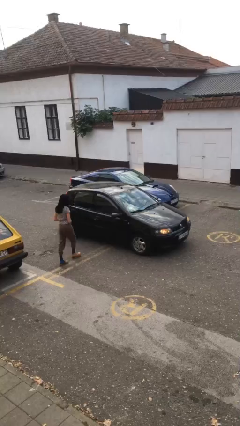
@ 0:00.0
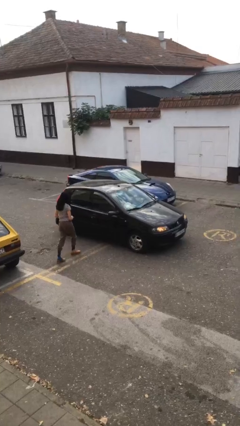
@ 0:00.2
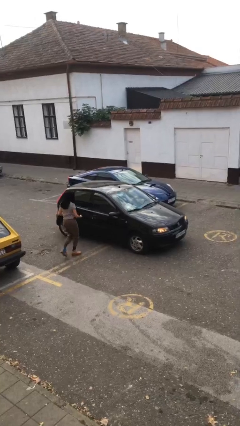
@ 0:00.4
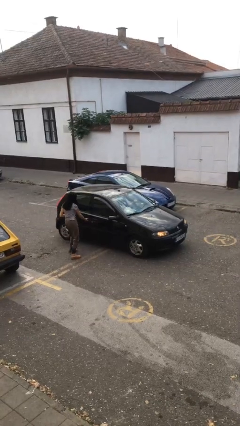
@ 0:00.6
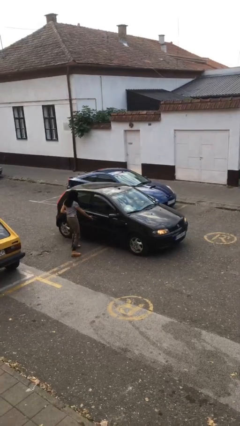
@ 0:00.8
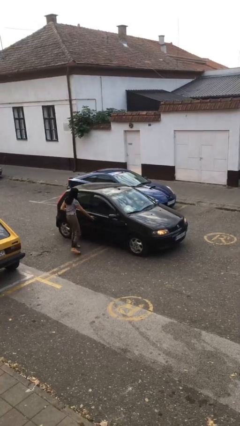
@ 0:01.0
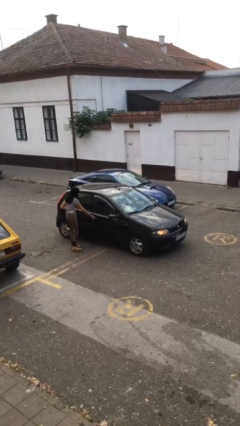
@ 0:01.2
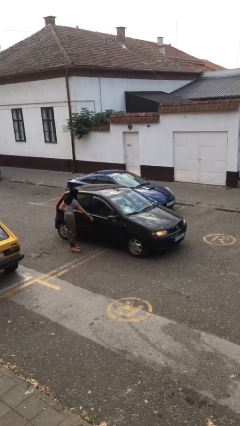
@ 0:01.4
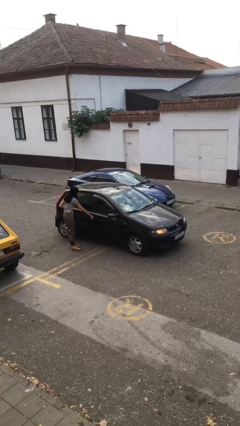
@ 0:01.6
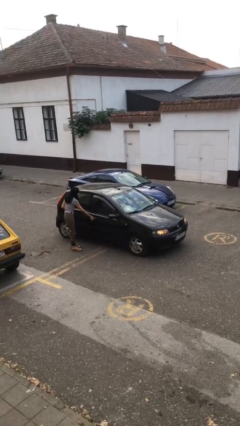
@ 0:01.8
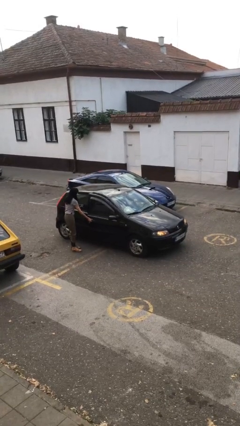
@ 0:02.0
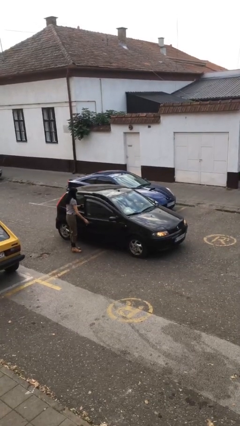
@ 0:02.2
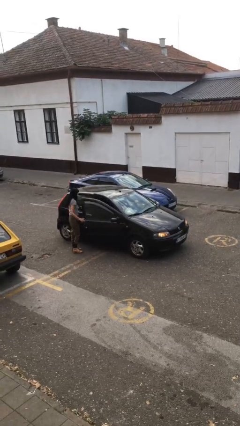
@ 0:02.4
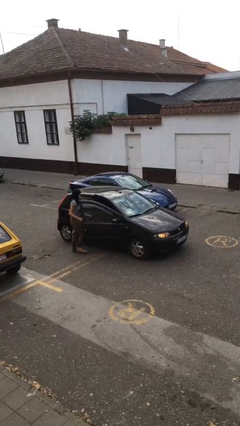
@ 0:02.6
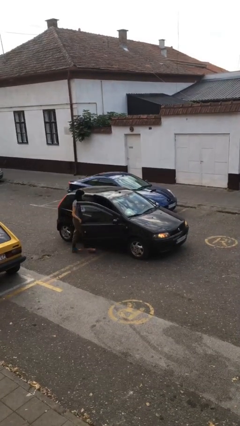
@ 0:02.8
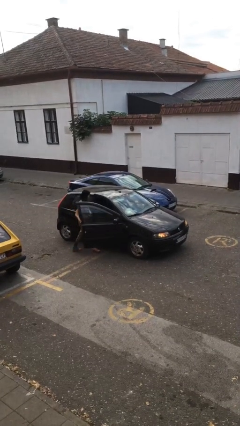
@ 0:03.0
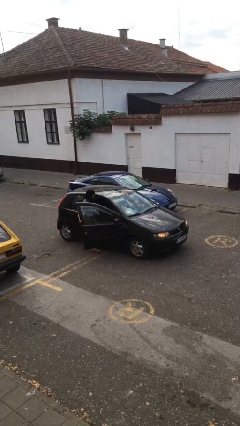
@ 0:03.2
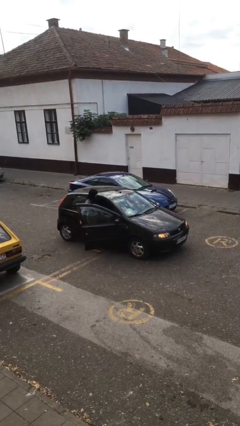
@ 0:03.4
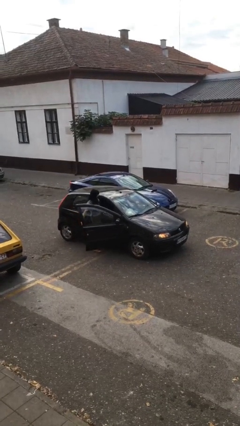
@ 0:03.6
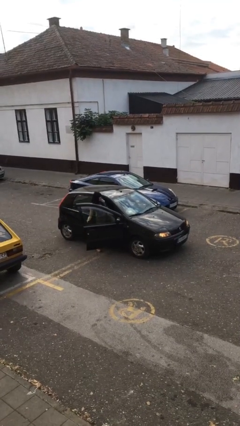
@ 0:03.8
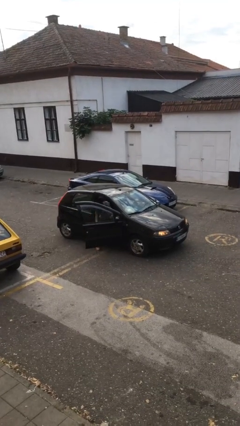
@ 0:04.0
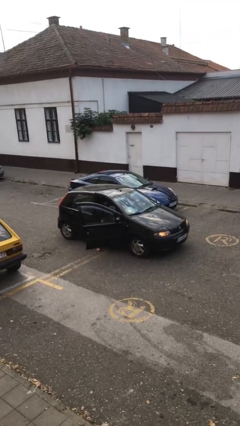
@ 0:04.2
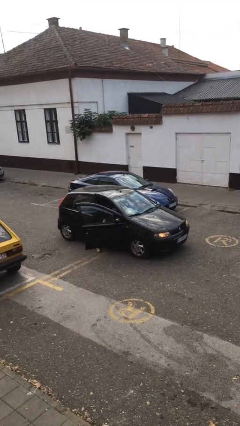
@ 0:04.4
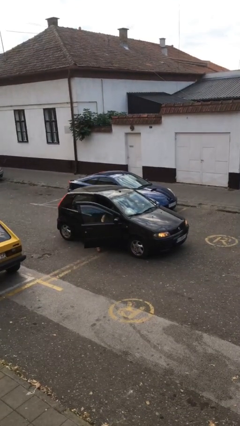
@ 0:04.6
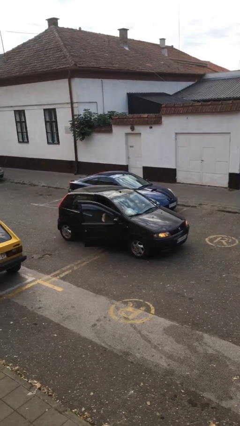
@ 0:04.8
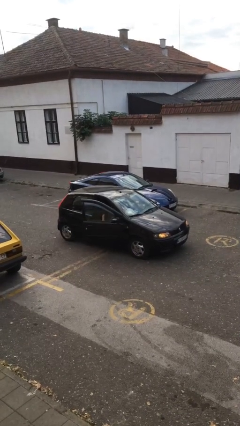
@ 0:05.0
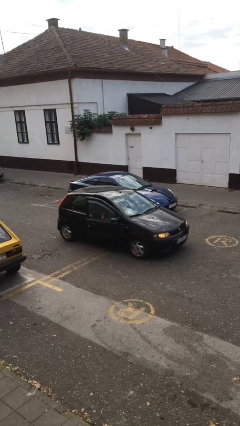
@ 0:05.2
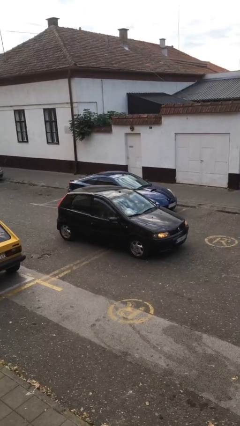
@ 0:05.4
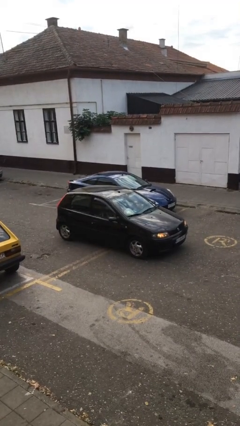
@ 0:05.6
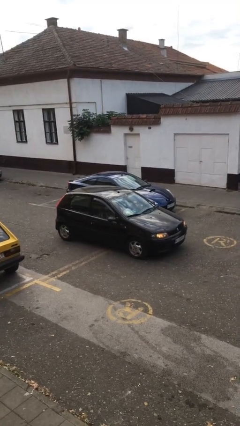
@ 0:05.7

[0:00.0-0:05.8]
car picks up person

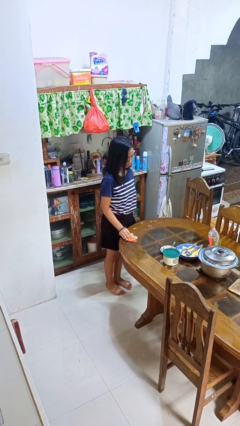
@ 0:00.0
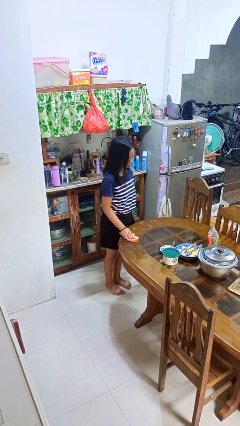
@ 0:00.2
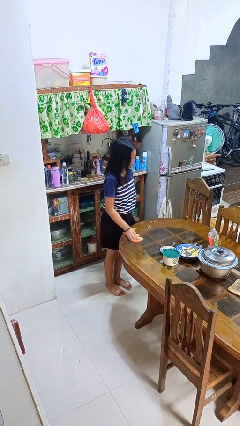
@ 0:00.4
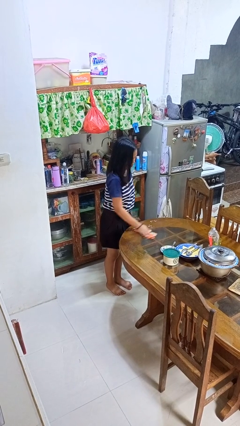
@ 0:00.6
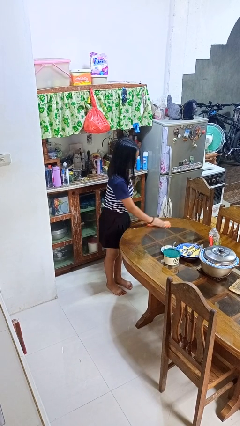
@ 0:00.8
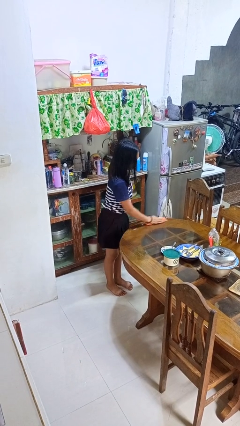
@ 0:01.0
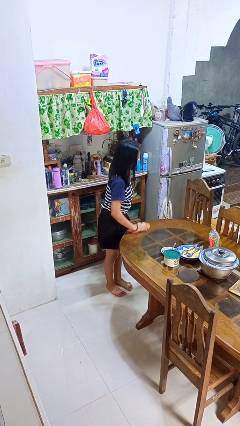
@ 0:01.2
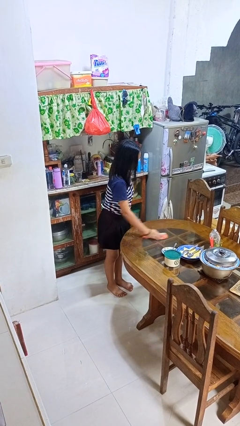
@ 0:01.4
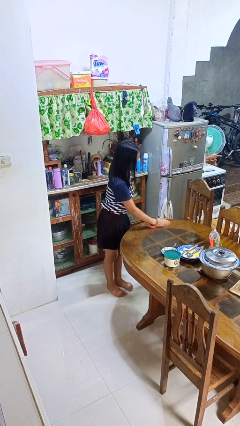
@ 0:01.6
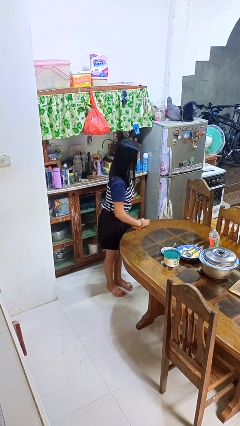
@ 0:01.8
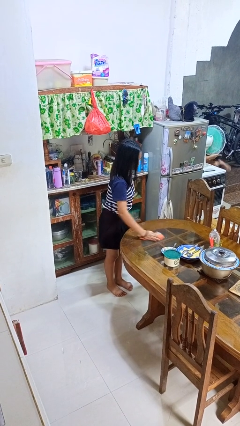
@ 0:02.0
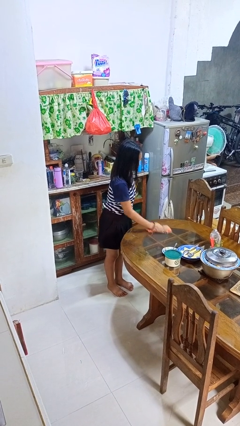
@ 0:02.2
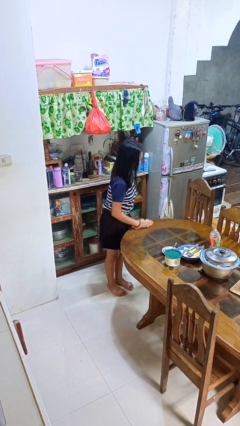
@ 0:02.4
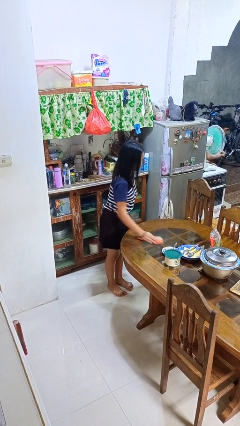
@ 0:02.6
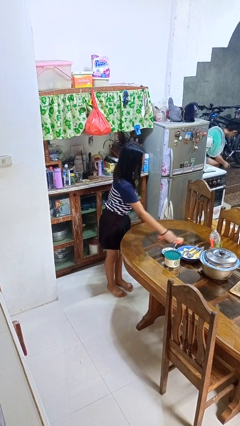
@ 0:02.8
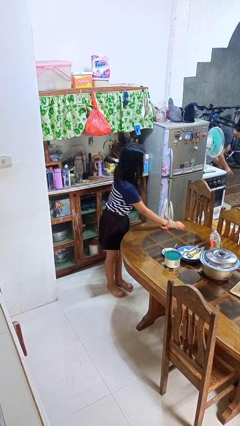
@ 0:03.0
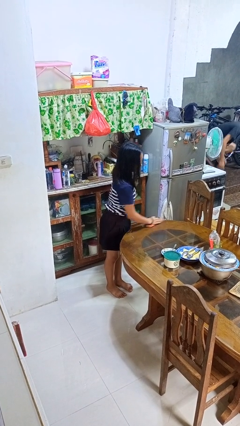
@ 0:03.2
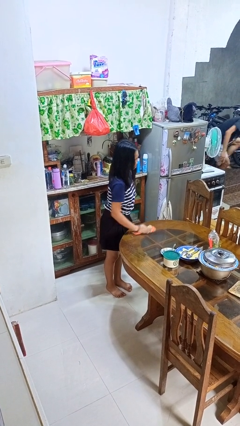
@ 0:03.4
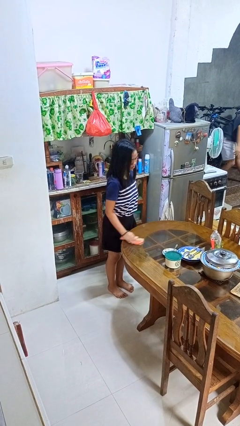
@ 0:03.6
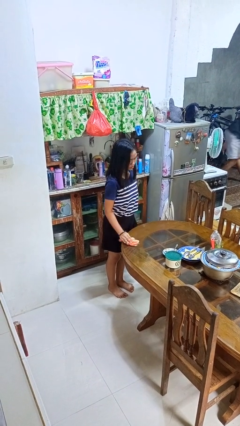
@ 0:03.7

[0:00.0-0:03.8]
person cleans table with rag

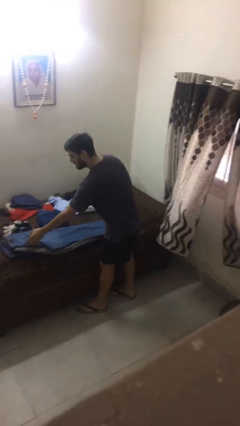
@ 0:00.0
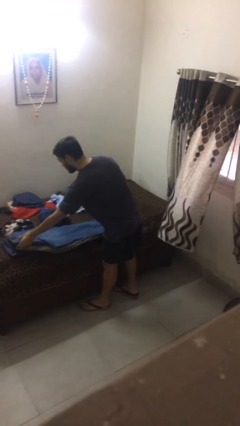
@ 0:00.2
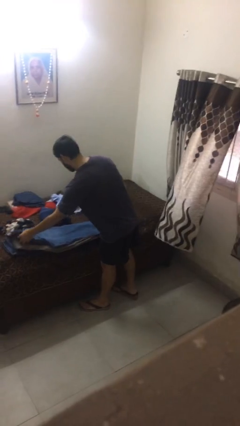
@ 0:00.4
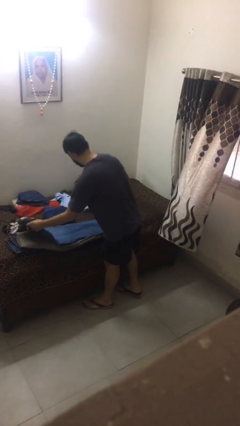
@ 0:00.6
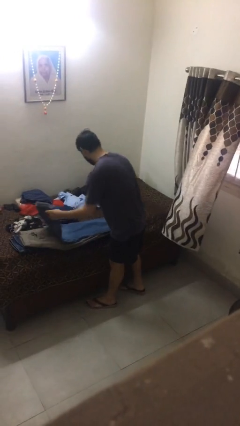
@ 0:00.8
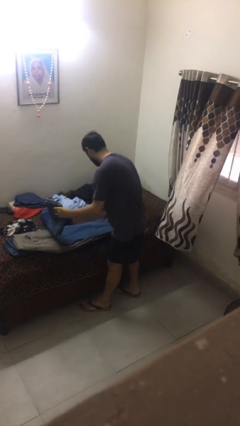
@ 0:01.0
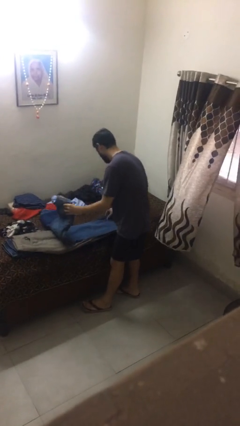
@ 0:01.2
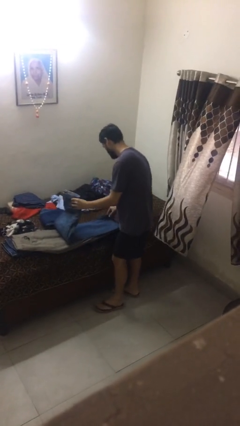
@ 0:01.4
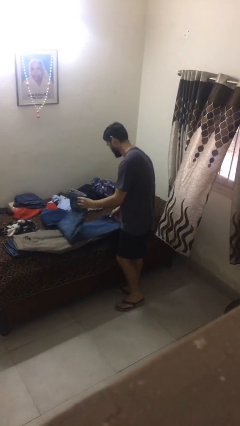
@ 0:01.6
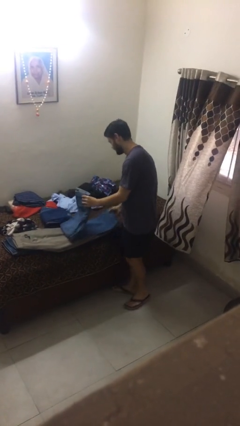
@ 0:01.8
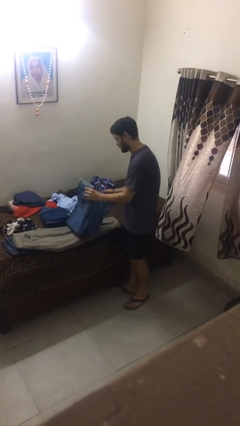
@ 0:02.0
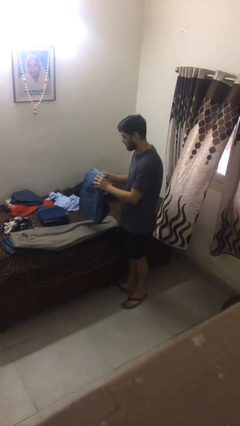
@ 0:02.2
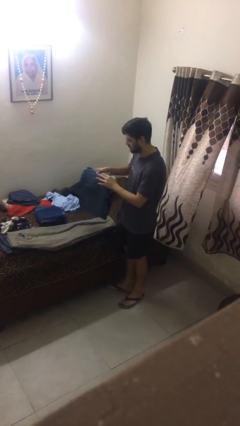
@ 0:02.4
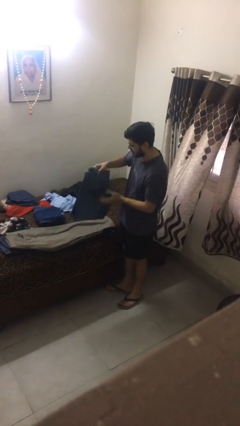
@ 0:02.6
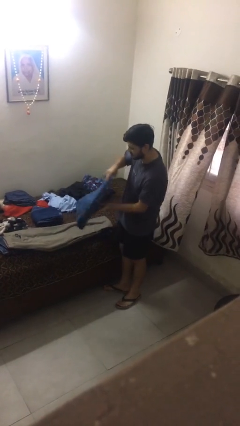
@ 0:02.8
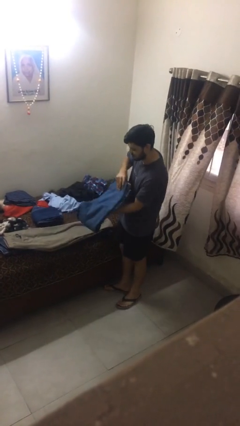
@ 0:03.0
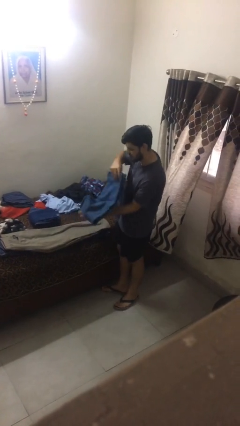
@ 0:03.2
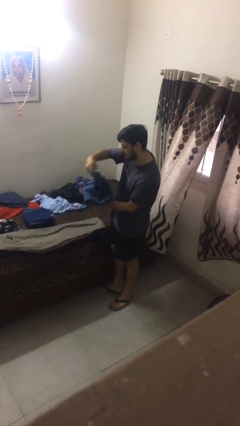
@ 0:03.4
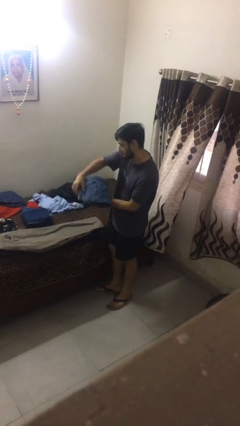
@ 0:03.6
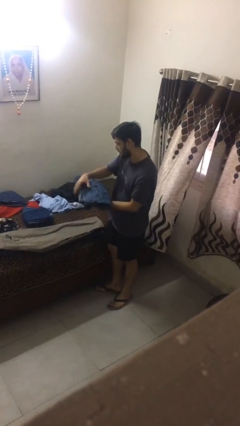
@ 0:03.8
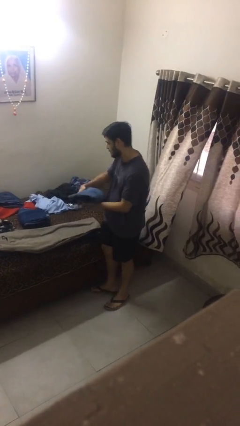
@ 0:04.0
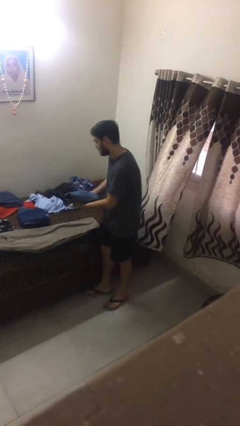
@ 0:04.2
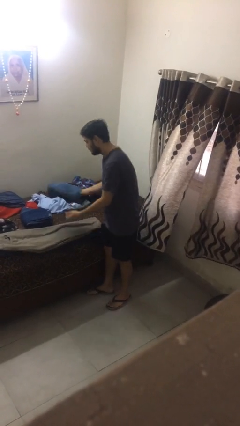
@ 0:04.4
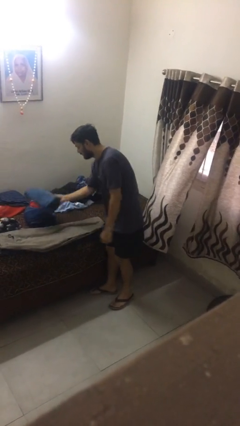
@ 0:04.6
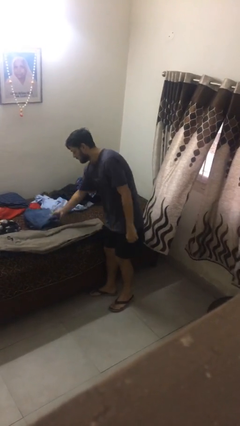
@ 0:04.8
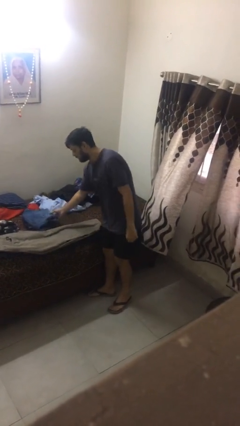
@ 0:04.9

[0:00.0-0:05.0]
person folds pants

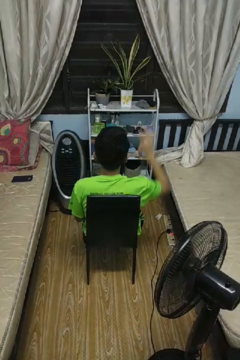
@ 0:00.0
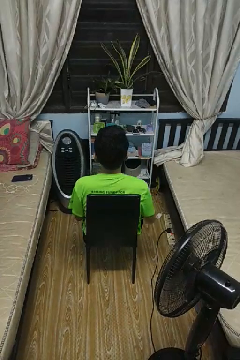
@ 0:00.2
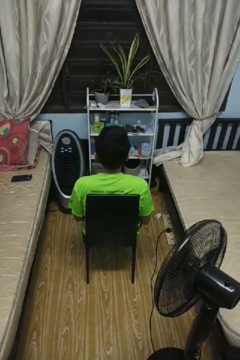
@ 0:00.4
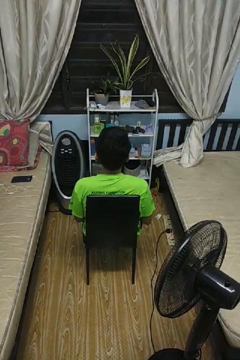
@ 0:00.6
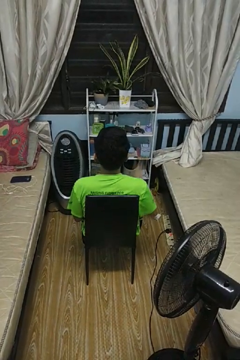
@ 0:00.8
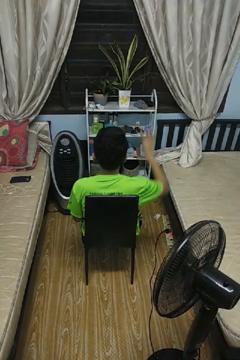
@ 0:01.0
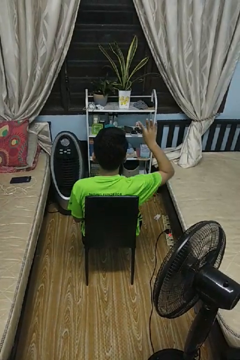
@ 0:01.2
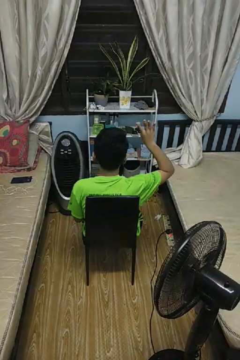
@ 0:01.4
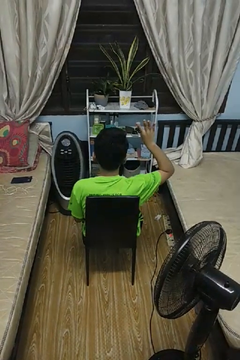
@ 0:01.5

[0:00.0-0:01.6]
person gestures number four

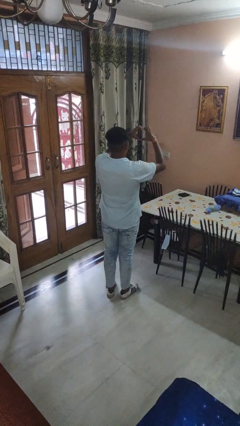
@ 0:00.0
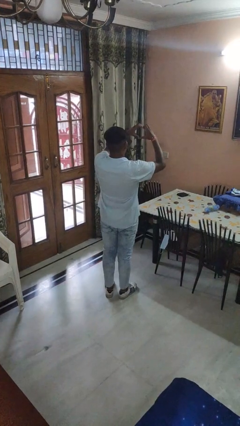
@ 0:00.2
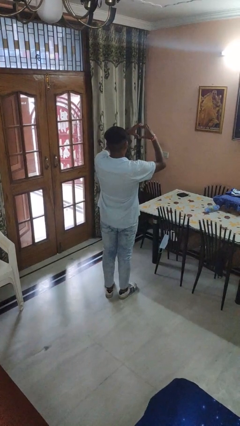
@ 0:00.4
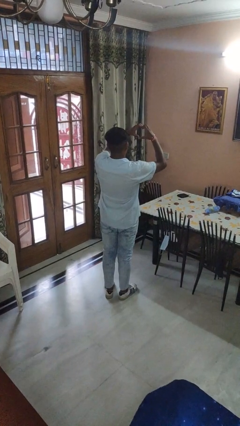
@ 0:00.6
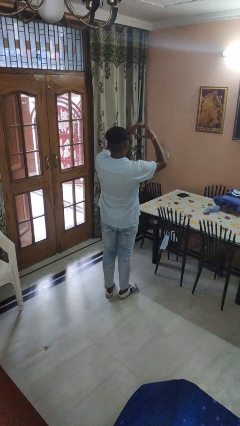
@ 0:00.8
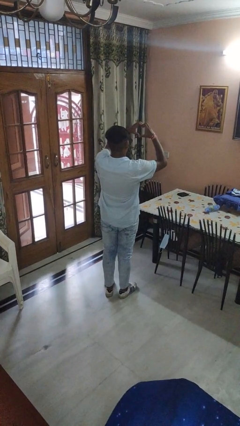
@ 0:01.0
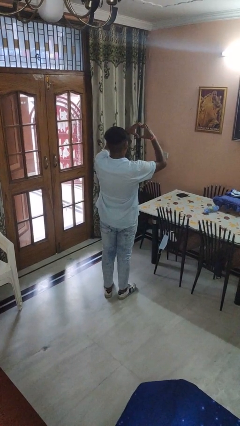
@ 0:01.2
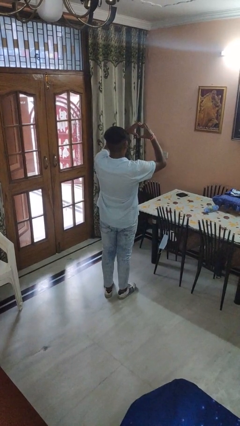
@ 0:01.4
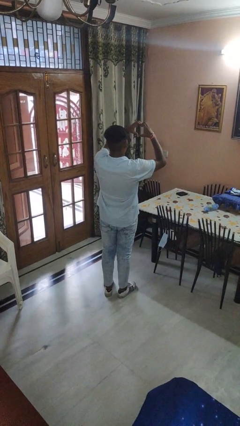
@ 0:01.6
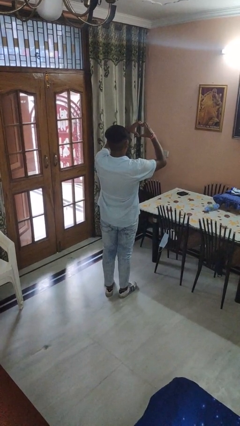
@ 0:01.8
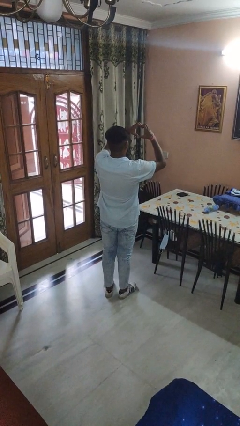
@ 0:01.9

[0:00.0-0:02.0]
person gestures heart
